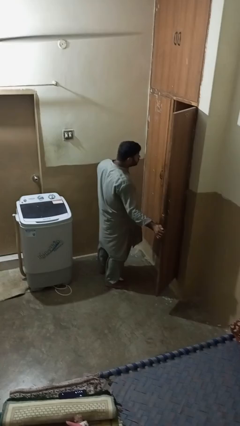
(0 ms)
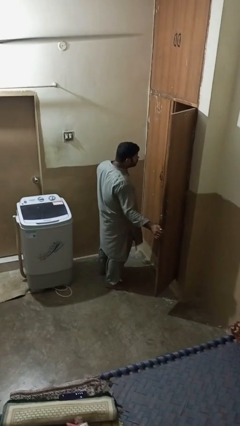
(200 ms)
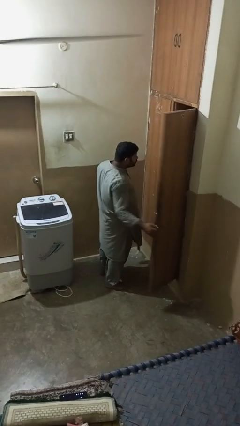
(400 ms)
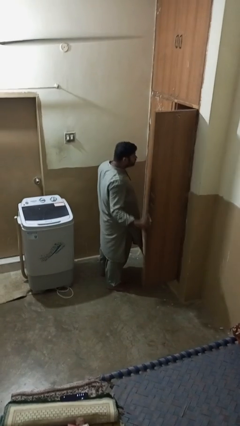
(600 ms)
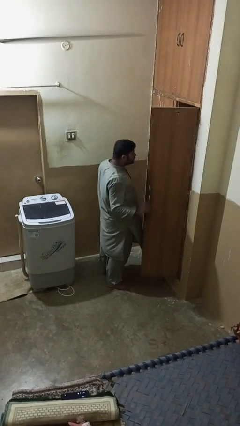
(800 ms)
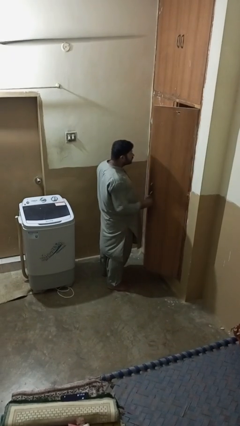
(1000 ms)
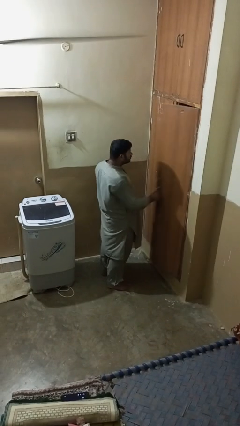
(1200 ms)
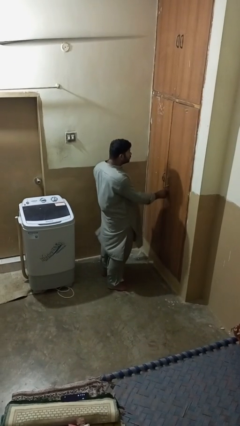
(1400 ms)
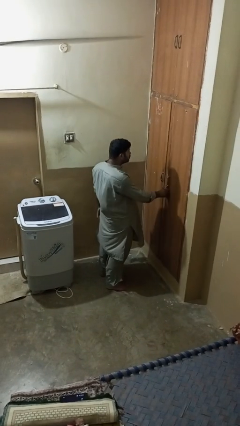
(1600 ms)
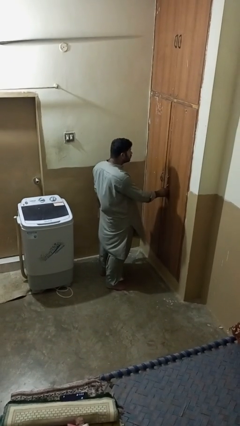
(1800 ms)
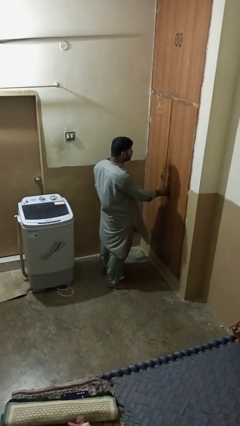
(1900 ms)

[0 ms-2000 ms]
person closes closet door

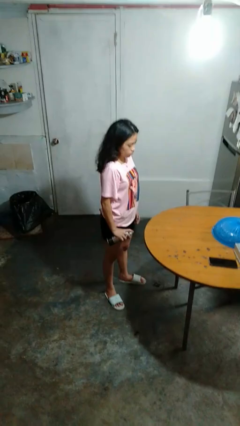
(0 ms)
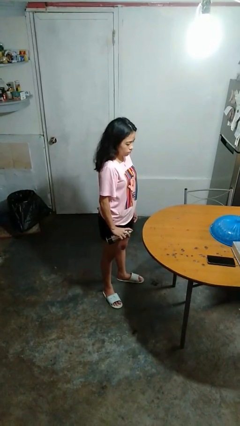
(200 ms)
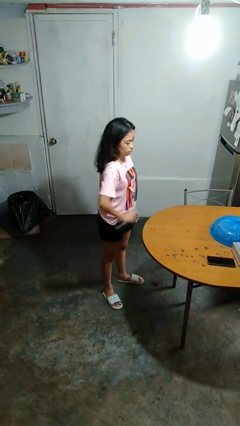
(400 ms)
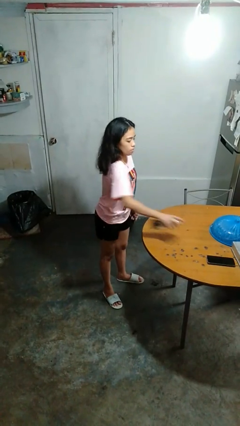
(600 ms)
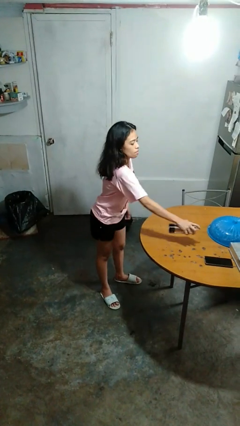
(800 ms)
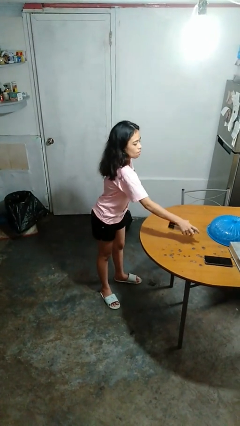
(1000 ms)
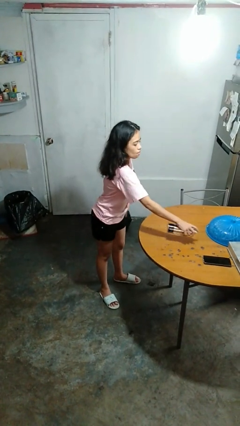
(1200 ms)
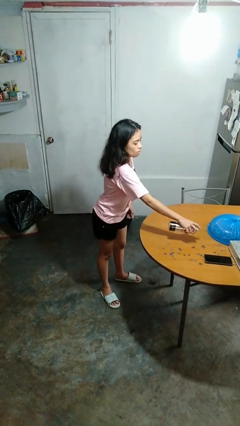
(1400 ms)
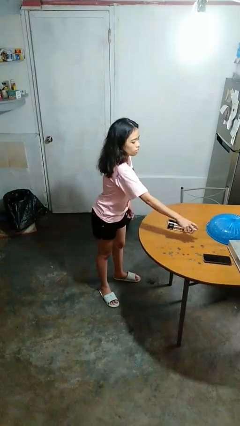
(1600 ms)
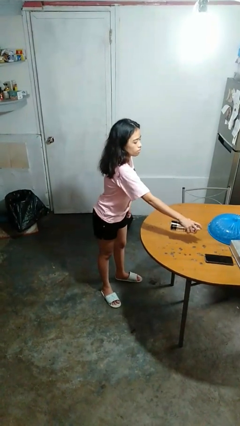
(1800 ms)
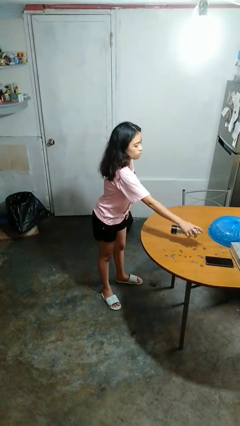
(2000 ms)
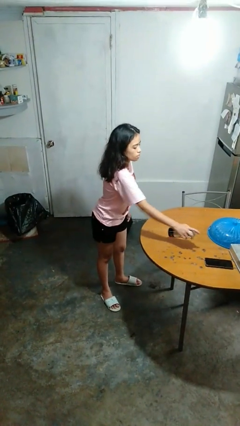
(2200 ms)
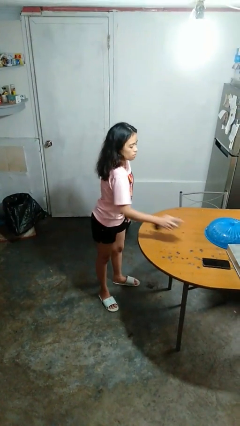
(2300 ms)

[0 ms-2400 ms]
person sprays from bottle

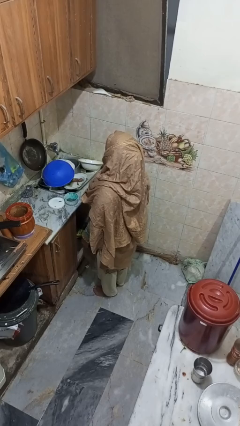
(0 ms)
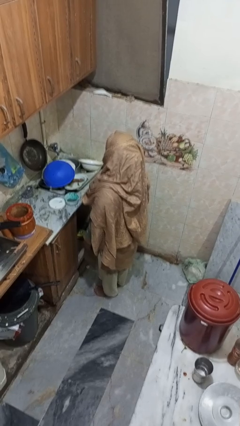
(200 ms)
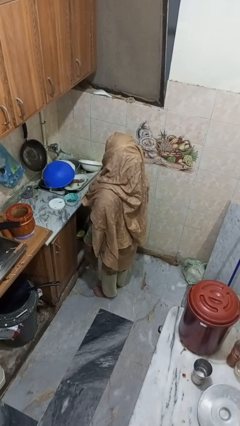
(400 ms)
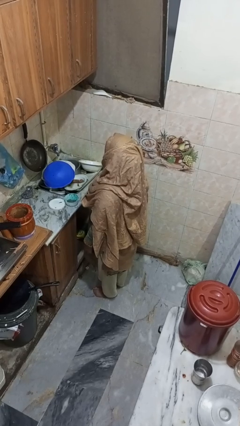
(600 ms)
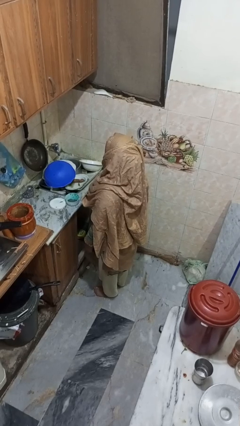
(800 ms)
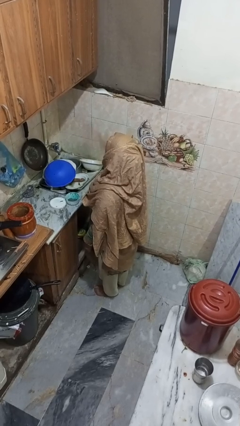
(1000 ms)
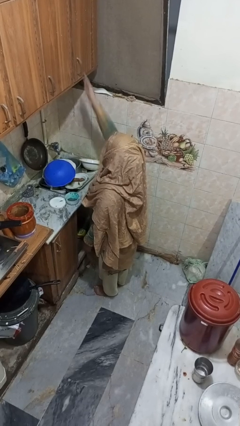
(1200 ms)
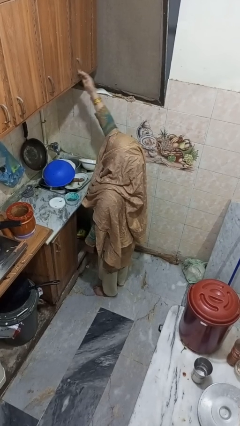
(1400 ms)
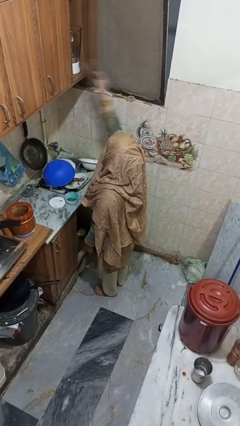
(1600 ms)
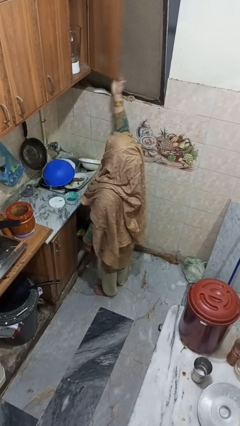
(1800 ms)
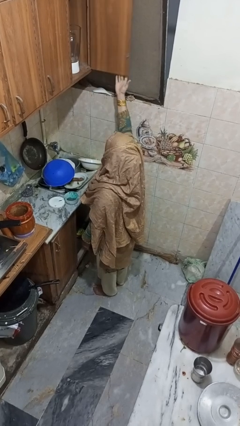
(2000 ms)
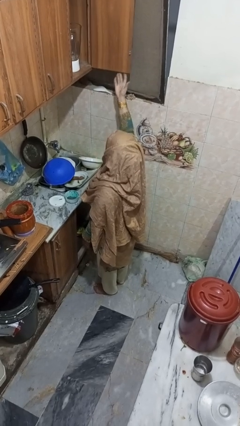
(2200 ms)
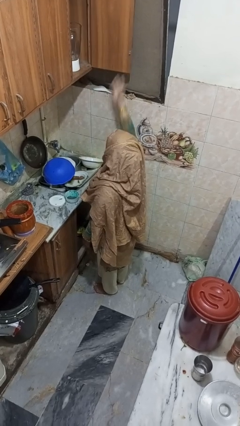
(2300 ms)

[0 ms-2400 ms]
person opens cabinet

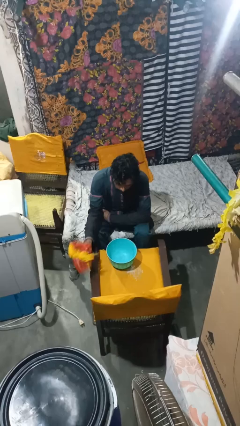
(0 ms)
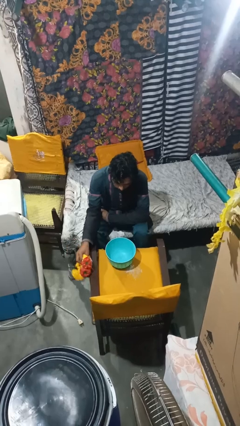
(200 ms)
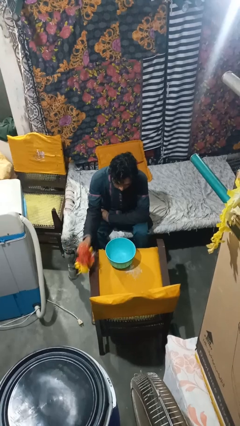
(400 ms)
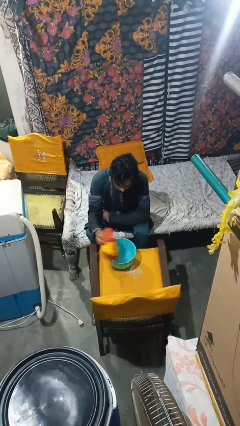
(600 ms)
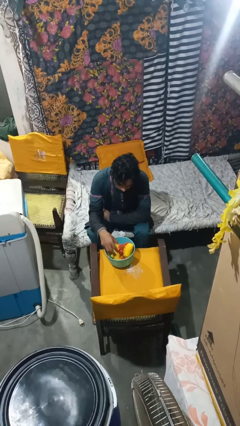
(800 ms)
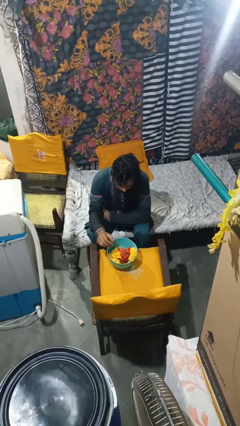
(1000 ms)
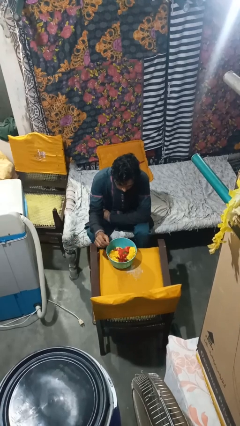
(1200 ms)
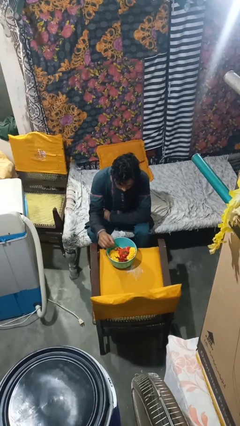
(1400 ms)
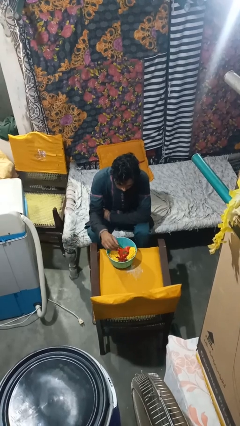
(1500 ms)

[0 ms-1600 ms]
person pours into bowl

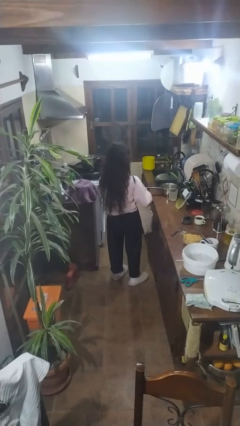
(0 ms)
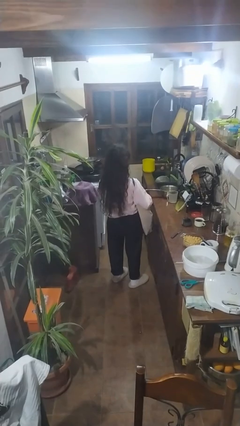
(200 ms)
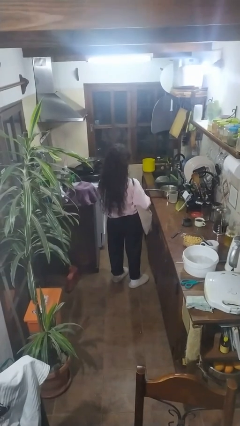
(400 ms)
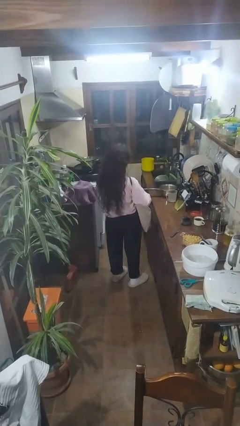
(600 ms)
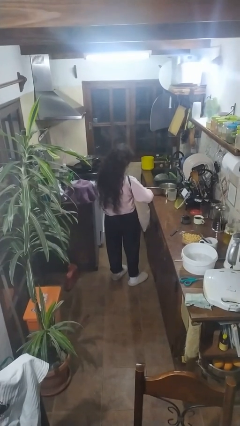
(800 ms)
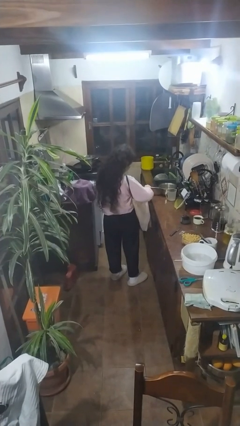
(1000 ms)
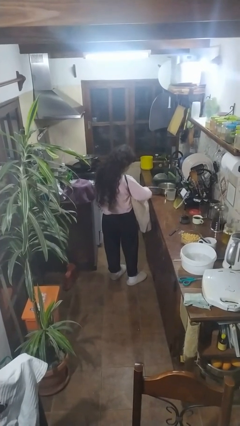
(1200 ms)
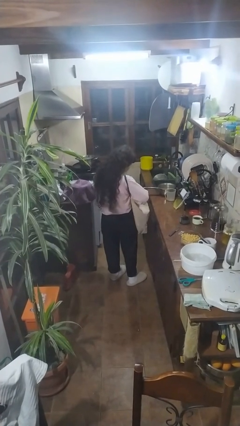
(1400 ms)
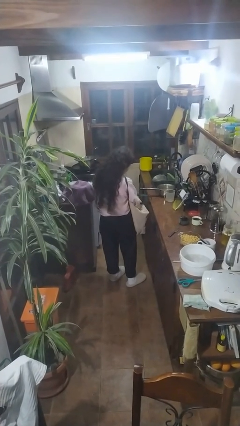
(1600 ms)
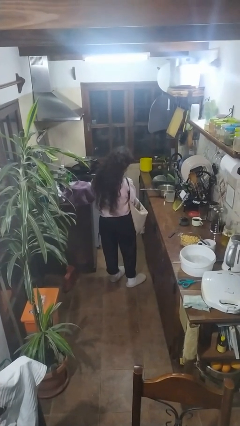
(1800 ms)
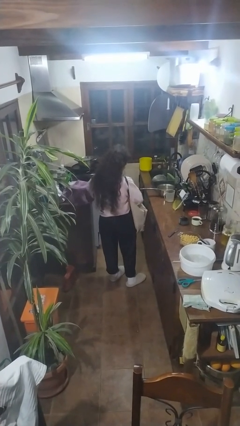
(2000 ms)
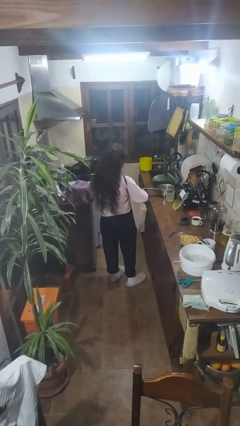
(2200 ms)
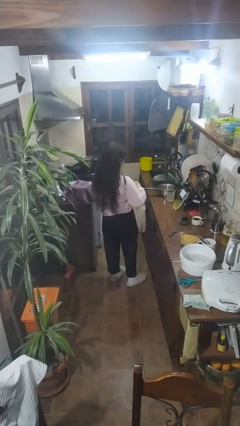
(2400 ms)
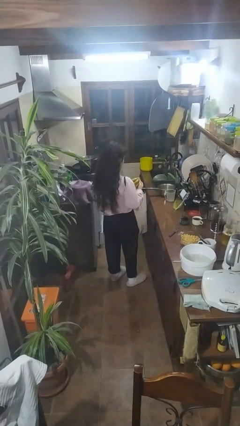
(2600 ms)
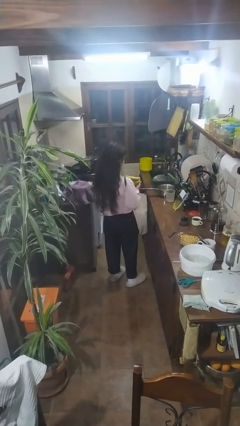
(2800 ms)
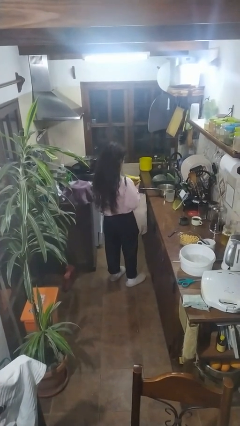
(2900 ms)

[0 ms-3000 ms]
person takes object from bag

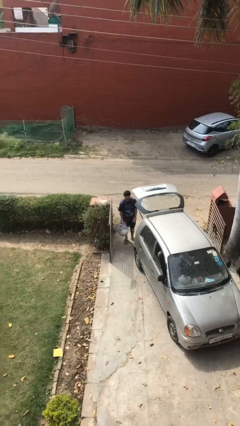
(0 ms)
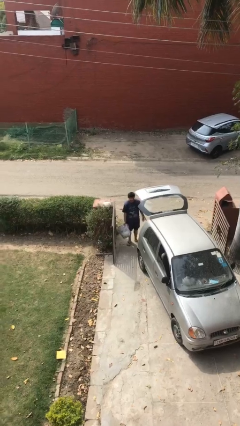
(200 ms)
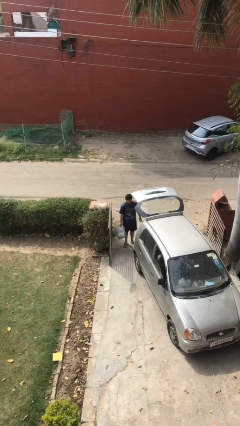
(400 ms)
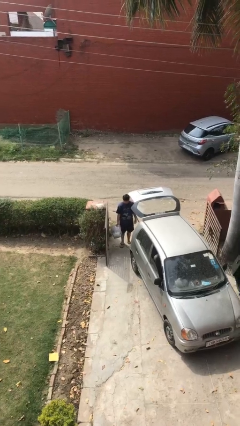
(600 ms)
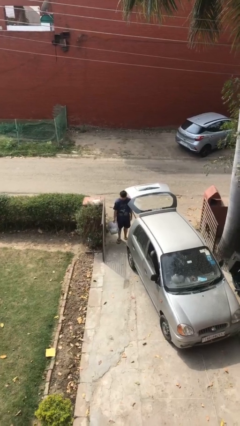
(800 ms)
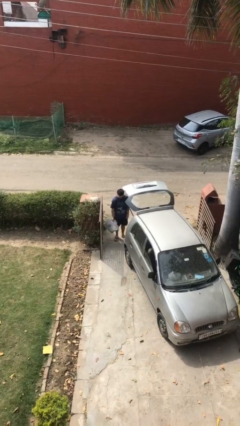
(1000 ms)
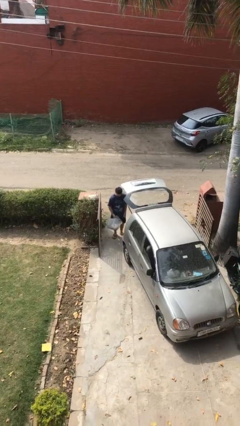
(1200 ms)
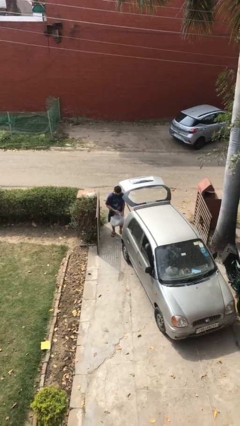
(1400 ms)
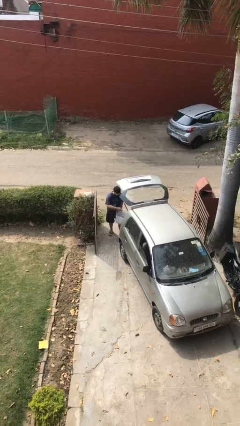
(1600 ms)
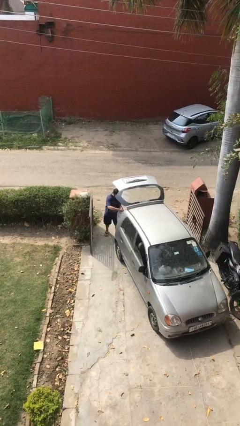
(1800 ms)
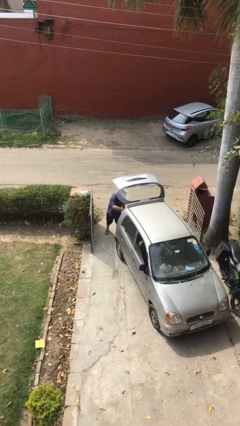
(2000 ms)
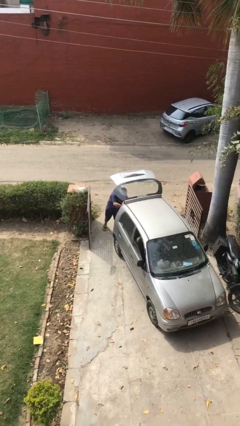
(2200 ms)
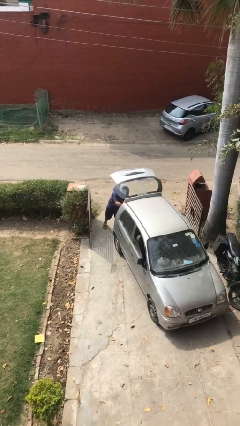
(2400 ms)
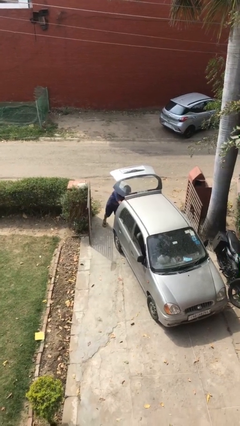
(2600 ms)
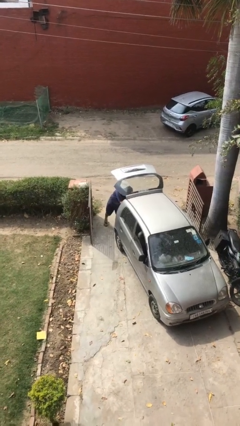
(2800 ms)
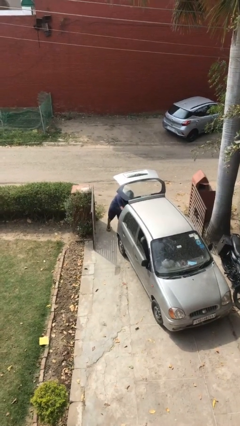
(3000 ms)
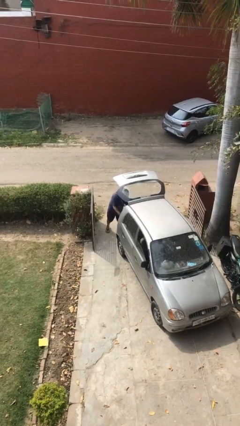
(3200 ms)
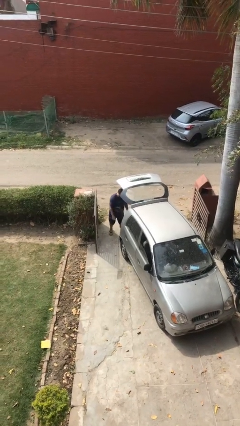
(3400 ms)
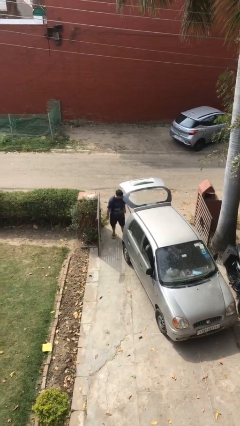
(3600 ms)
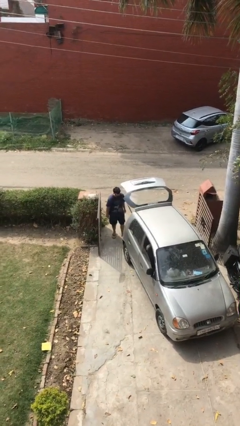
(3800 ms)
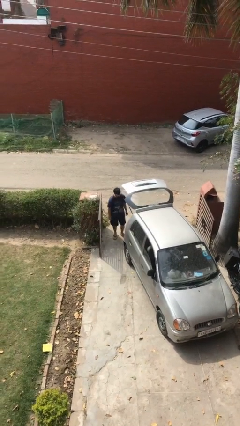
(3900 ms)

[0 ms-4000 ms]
person loads car

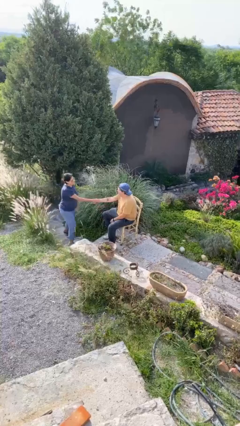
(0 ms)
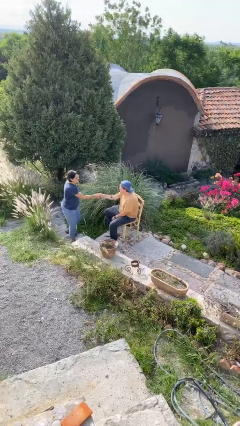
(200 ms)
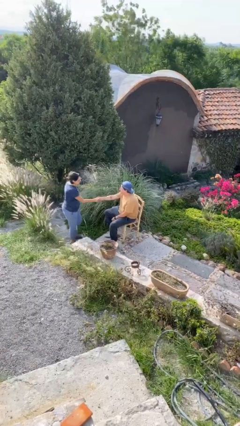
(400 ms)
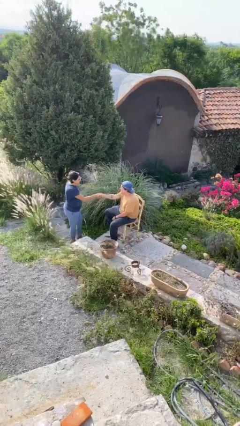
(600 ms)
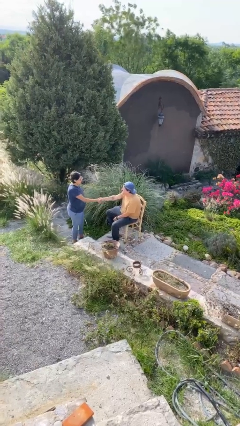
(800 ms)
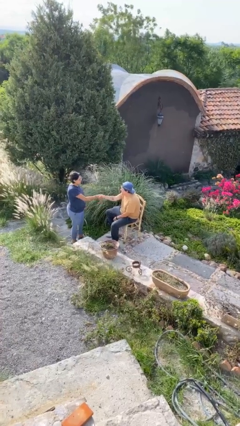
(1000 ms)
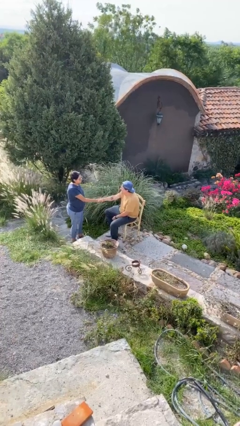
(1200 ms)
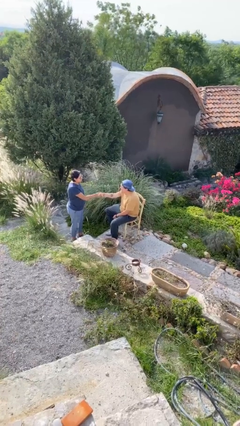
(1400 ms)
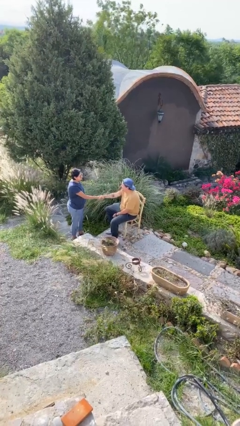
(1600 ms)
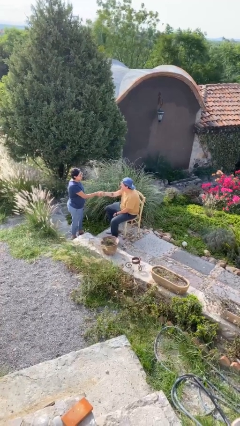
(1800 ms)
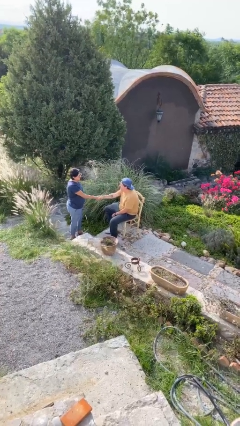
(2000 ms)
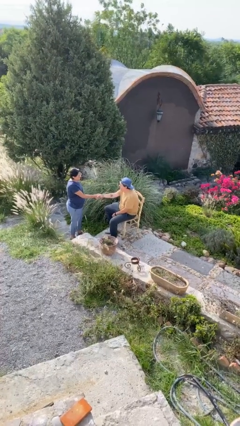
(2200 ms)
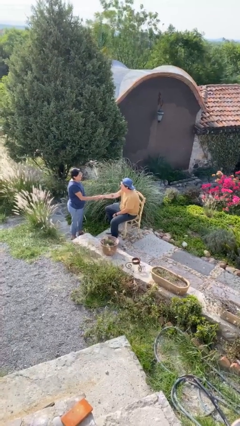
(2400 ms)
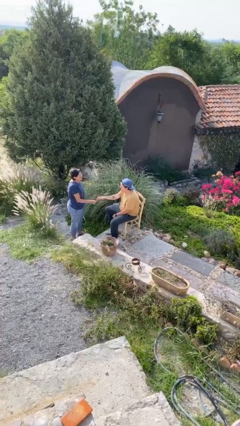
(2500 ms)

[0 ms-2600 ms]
person shakes hand
